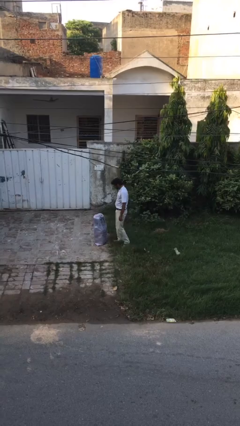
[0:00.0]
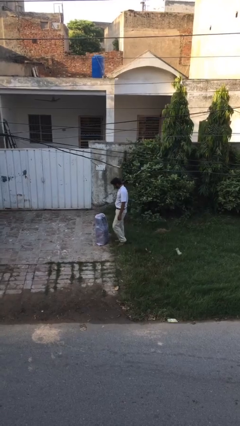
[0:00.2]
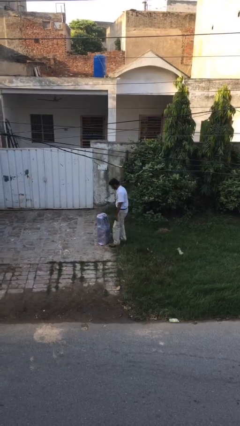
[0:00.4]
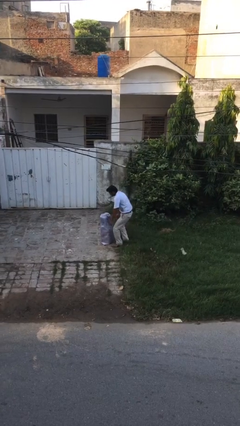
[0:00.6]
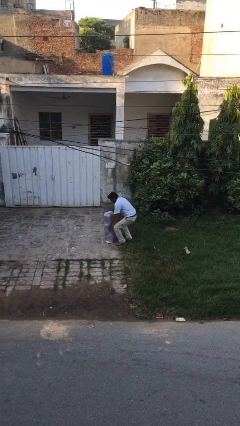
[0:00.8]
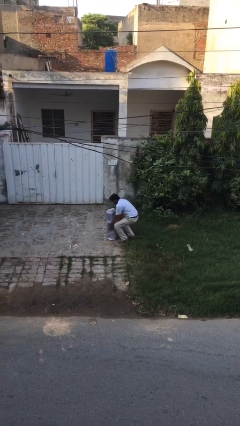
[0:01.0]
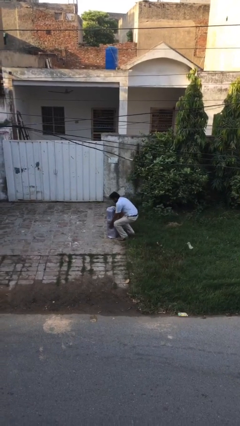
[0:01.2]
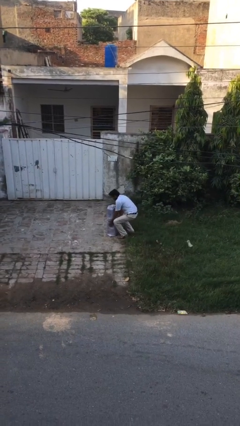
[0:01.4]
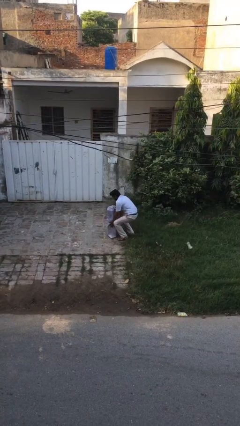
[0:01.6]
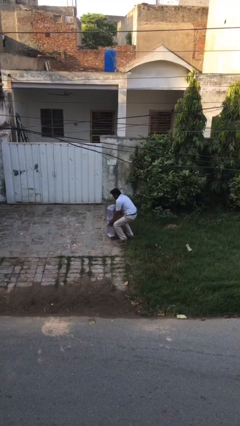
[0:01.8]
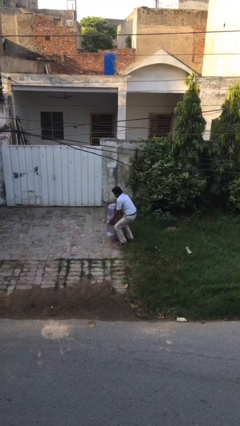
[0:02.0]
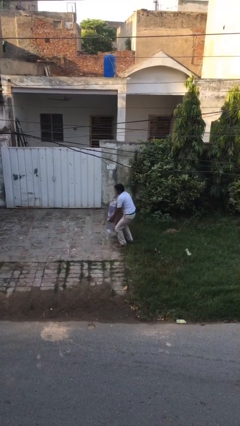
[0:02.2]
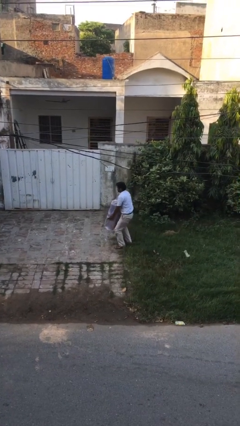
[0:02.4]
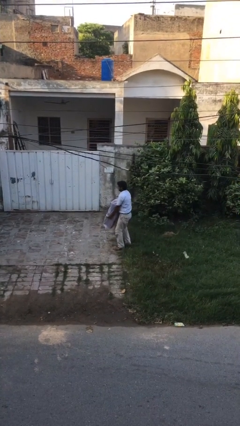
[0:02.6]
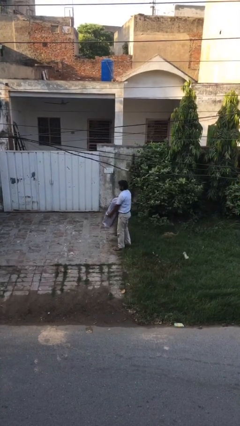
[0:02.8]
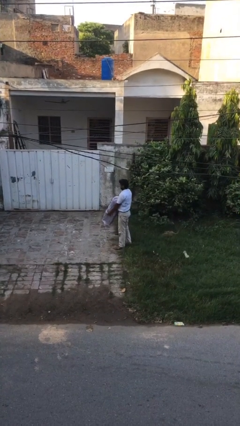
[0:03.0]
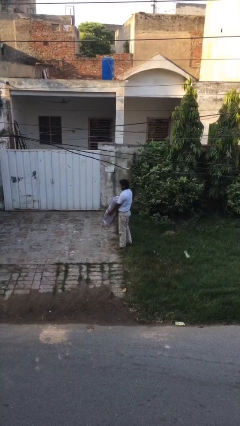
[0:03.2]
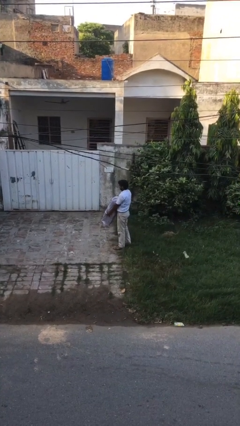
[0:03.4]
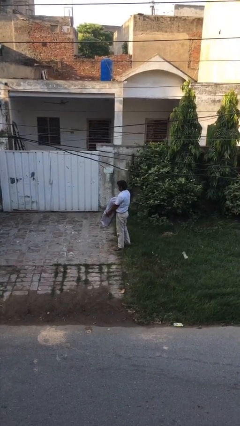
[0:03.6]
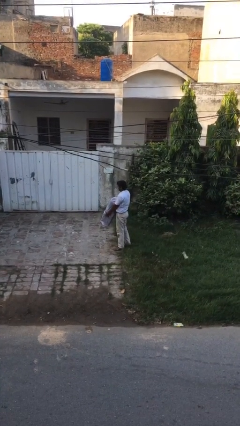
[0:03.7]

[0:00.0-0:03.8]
person picks up object from floor

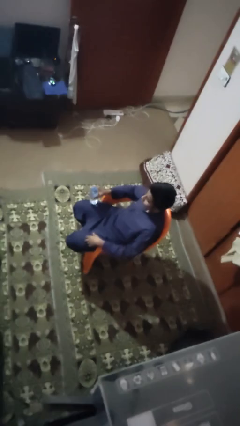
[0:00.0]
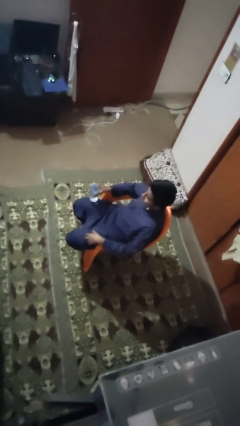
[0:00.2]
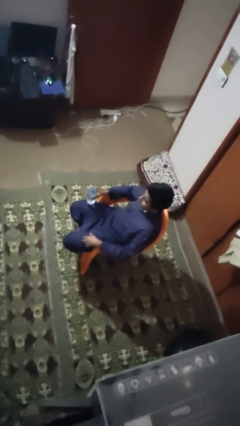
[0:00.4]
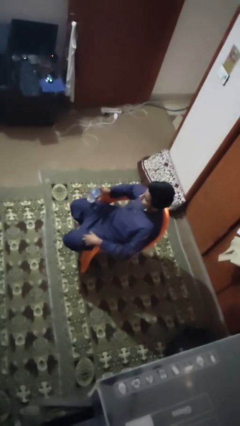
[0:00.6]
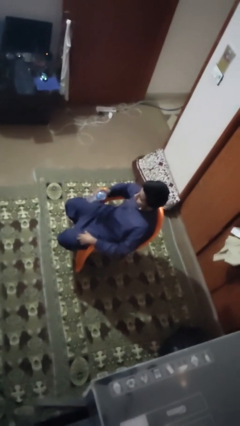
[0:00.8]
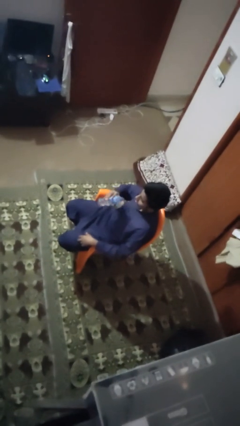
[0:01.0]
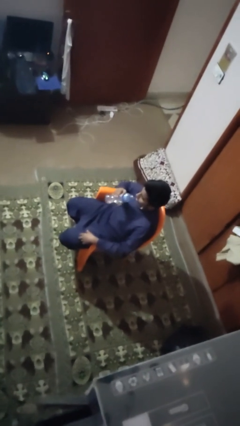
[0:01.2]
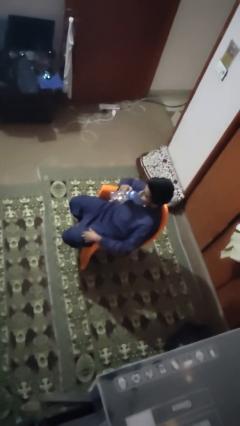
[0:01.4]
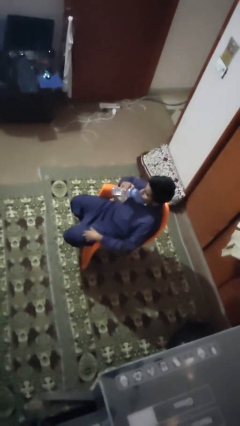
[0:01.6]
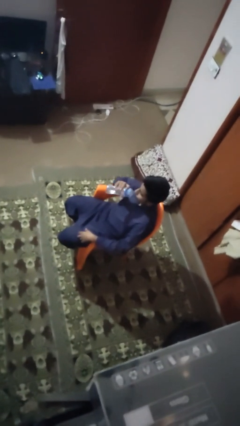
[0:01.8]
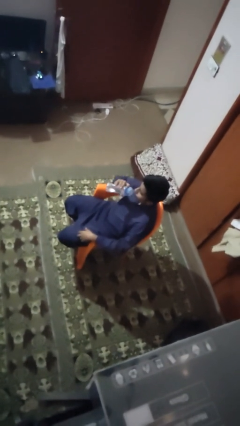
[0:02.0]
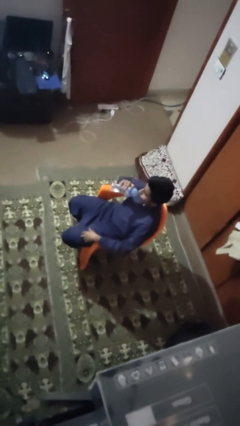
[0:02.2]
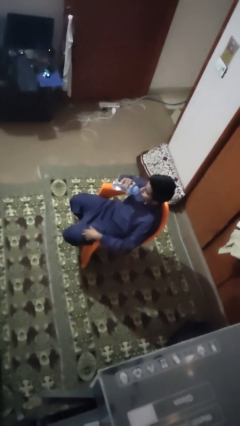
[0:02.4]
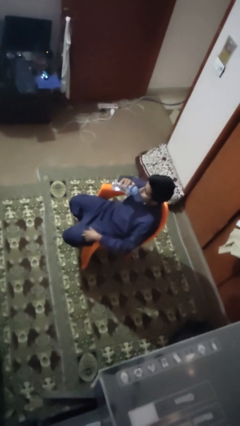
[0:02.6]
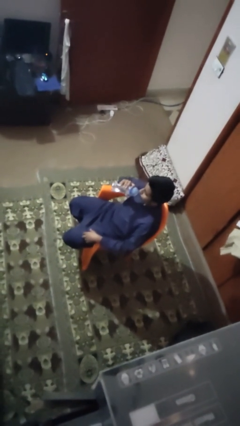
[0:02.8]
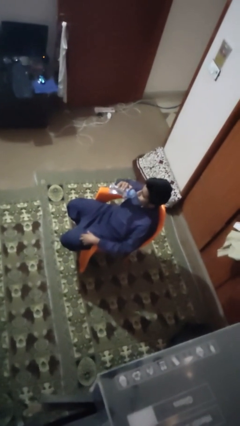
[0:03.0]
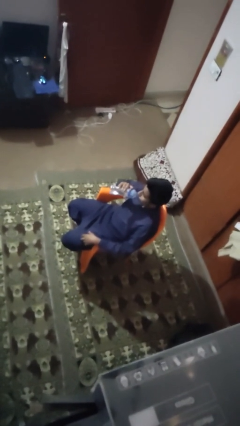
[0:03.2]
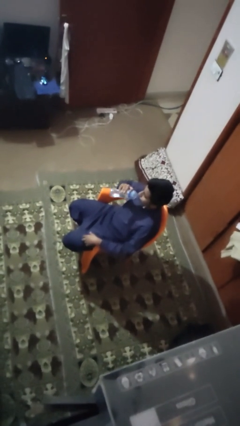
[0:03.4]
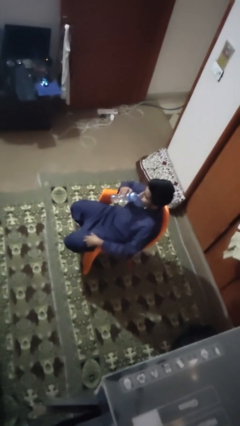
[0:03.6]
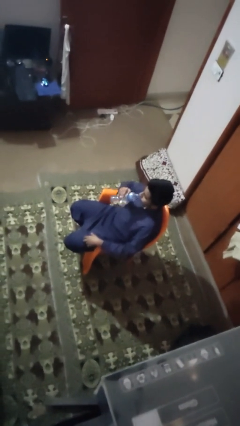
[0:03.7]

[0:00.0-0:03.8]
person drinks from bottle

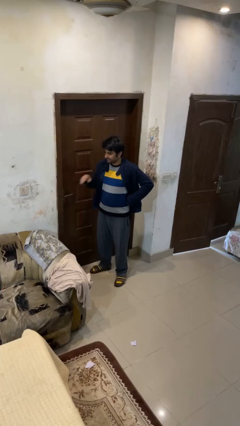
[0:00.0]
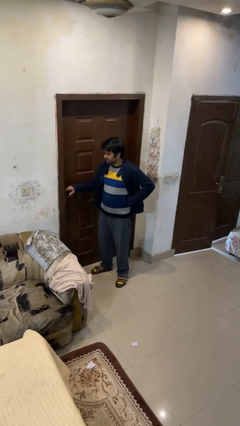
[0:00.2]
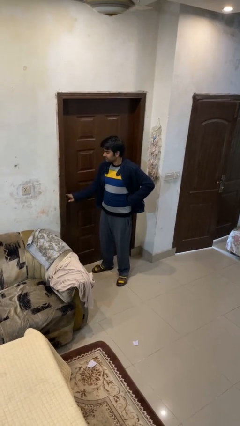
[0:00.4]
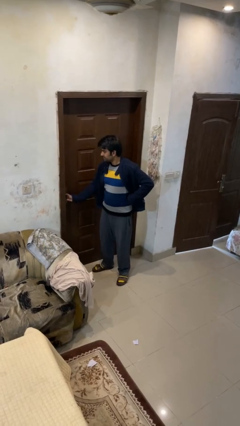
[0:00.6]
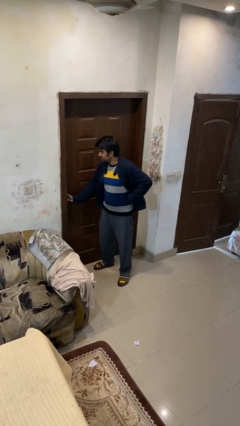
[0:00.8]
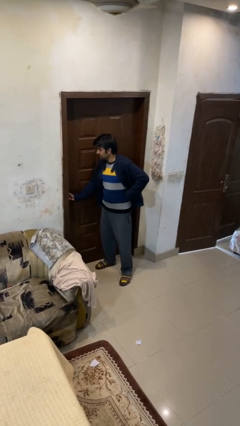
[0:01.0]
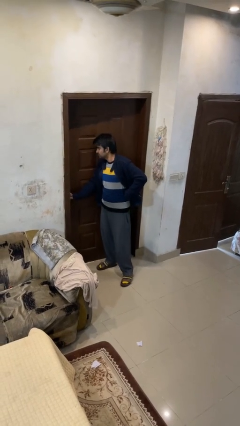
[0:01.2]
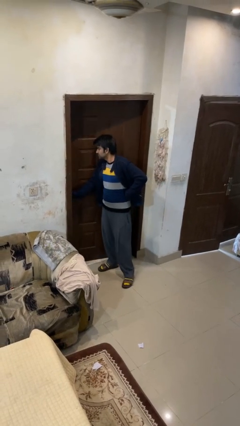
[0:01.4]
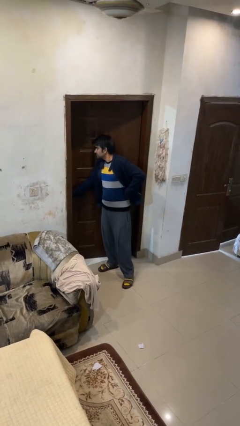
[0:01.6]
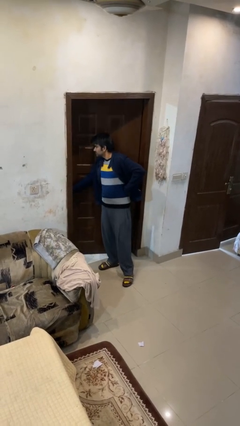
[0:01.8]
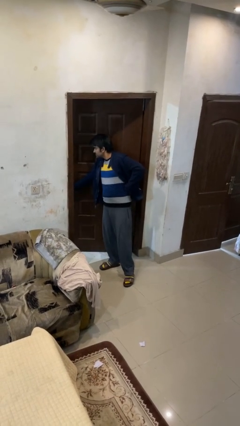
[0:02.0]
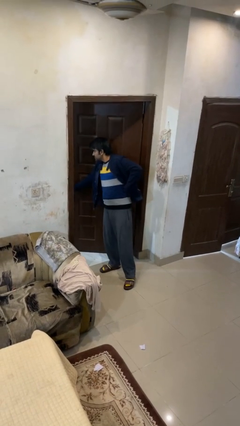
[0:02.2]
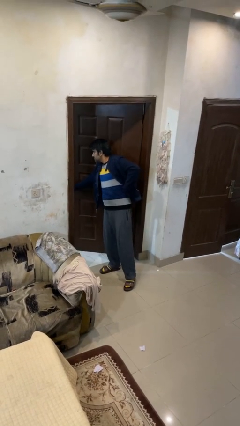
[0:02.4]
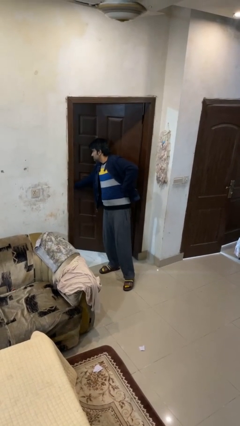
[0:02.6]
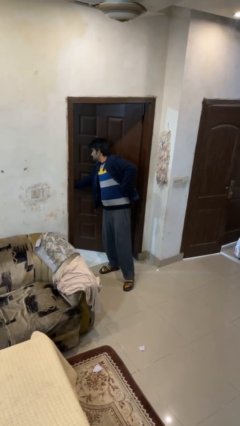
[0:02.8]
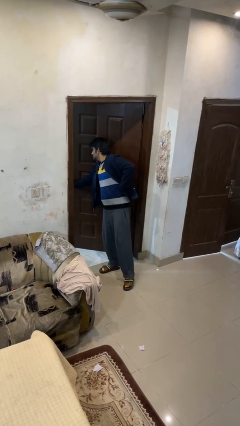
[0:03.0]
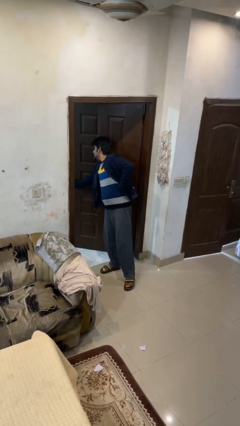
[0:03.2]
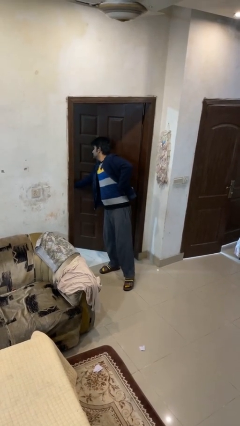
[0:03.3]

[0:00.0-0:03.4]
person opens facility door

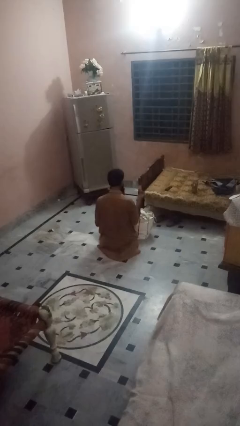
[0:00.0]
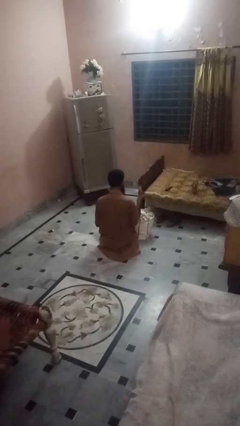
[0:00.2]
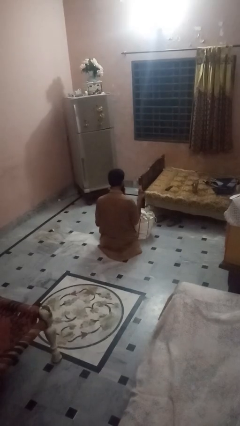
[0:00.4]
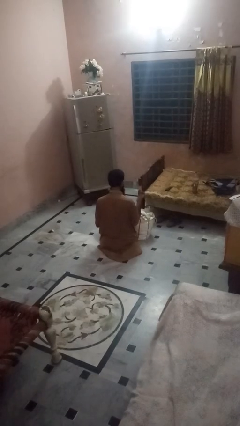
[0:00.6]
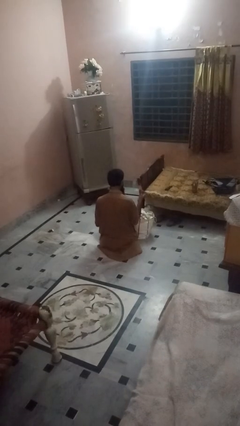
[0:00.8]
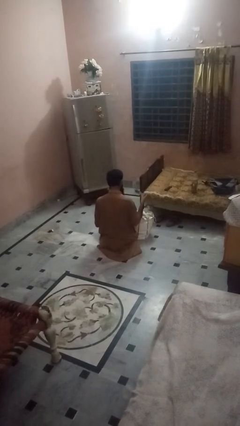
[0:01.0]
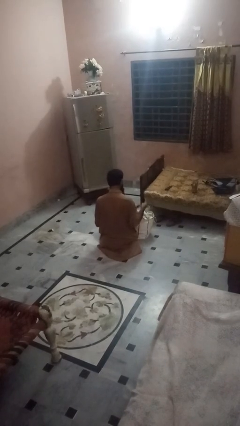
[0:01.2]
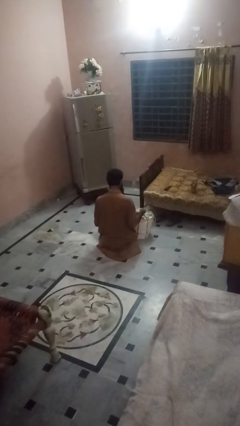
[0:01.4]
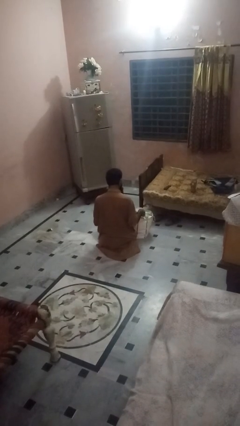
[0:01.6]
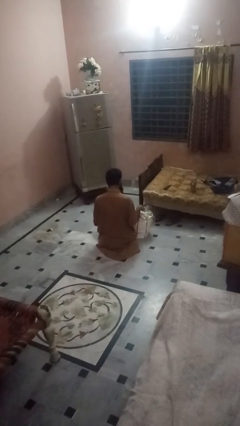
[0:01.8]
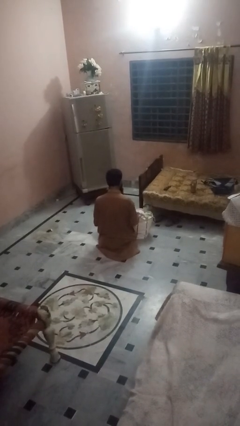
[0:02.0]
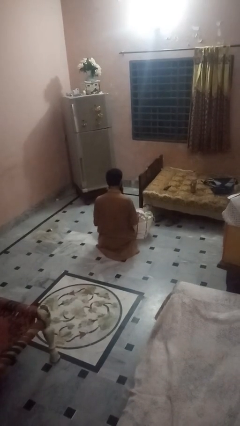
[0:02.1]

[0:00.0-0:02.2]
person puts object into bag

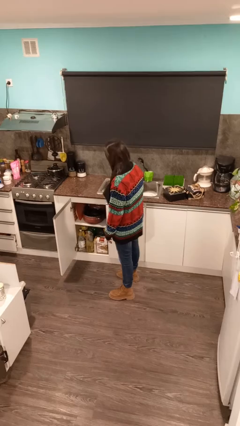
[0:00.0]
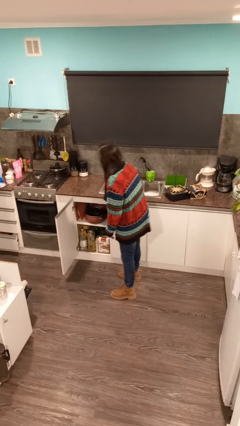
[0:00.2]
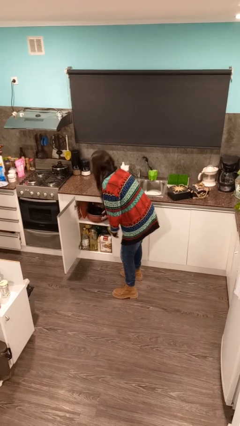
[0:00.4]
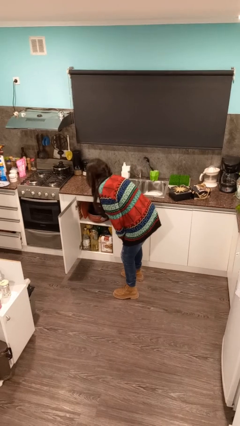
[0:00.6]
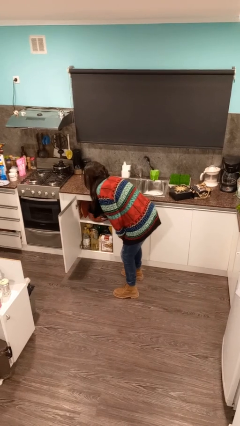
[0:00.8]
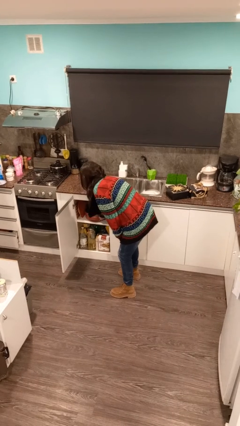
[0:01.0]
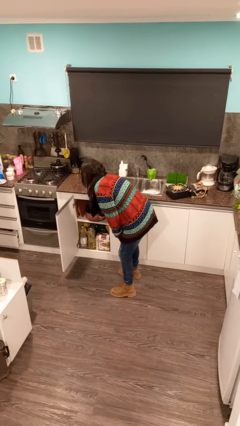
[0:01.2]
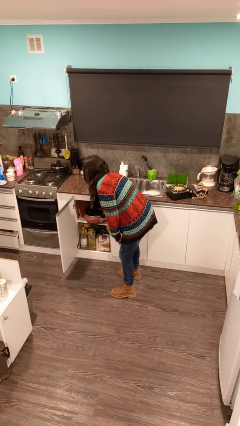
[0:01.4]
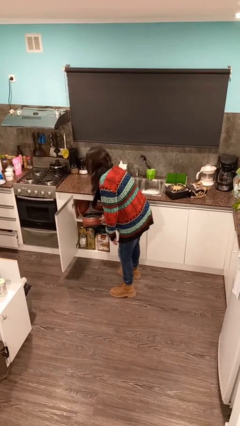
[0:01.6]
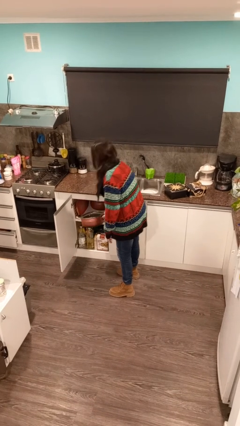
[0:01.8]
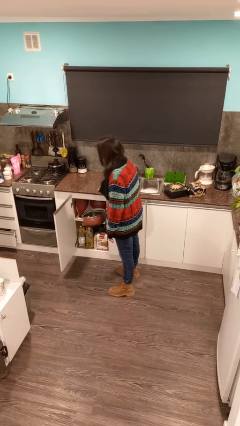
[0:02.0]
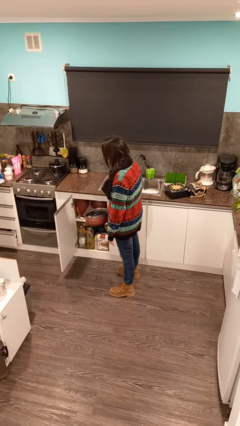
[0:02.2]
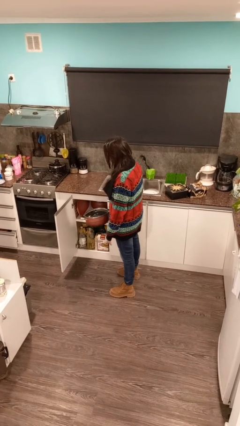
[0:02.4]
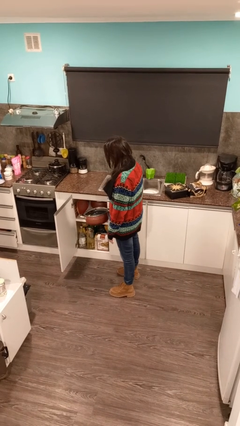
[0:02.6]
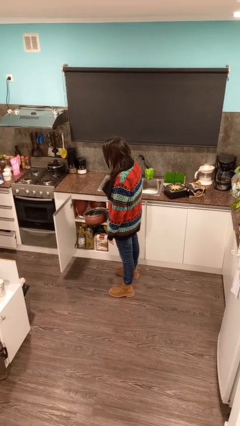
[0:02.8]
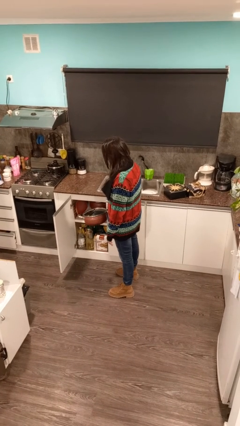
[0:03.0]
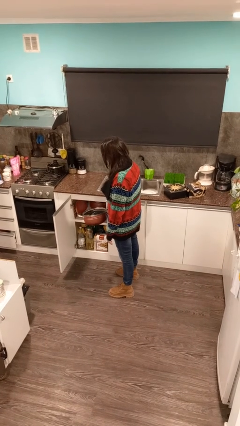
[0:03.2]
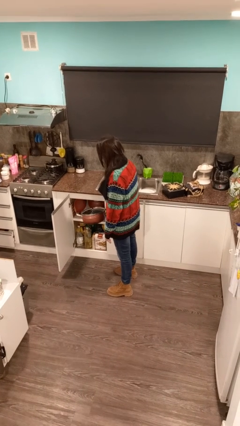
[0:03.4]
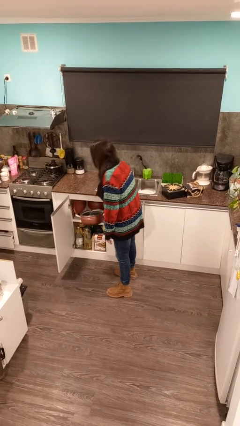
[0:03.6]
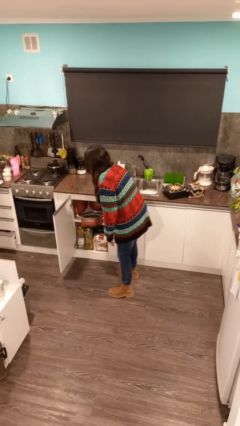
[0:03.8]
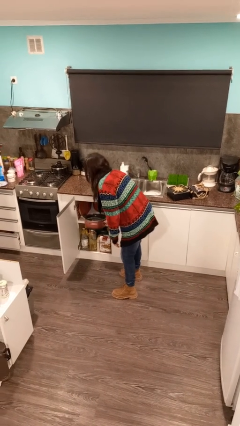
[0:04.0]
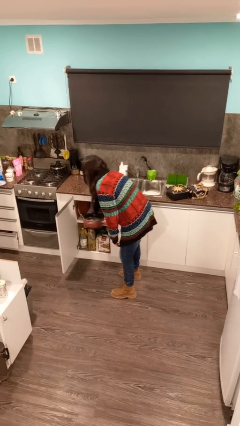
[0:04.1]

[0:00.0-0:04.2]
person picks up object from cabinet
